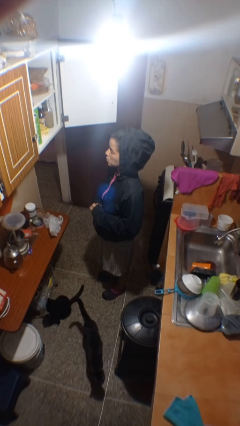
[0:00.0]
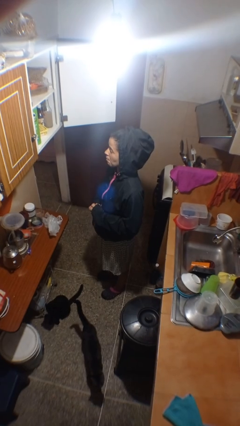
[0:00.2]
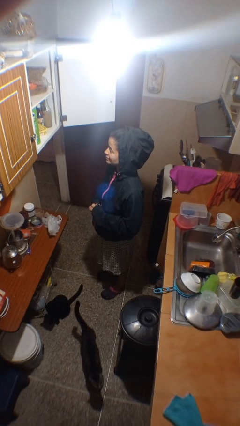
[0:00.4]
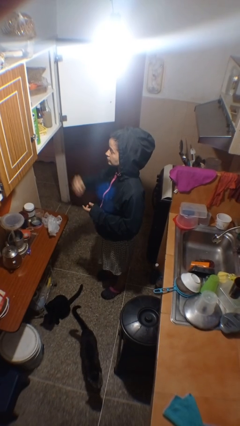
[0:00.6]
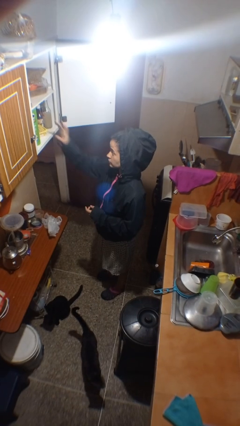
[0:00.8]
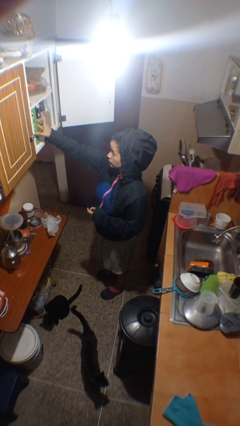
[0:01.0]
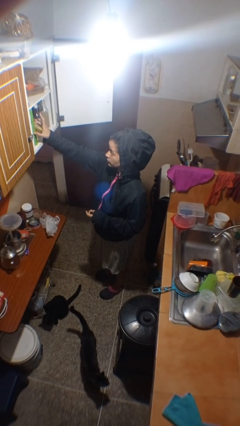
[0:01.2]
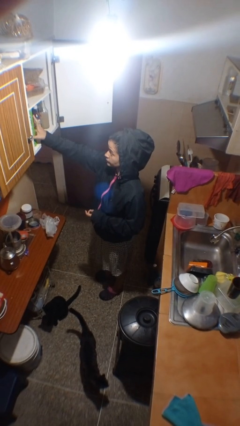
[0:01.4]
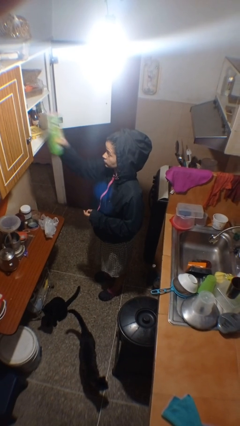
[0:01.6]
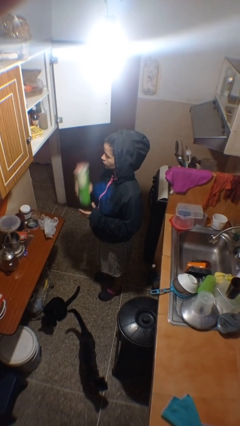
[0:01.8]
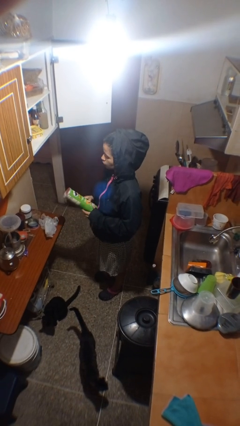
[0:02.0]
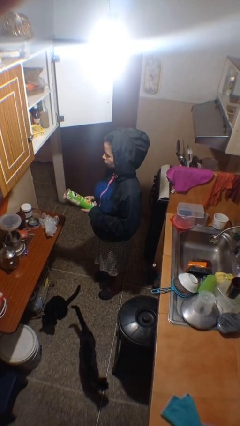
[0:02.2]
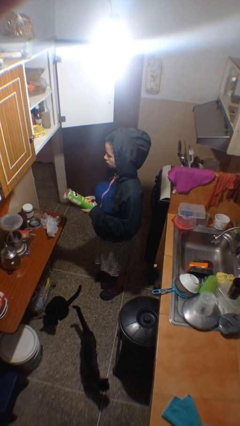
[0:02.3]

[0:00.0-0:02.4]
person takes object from cabinet

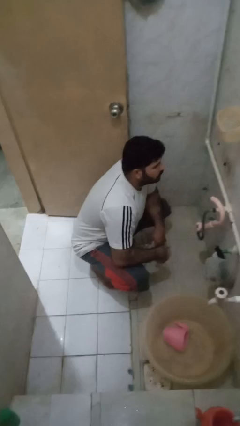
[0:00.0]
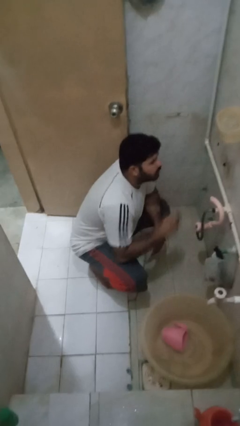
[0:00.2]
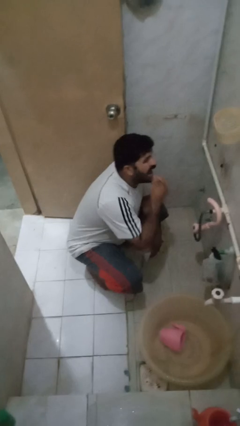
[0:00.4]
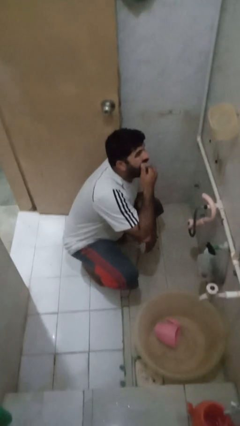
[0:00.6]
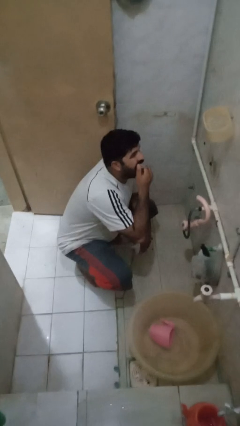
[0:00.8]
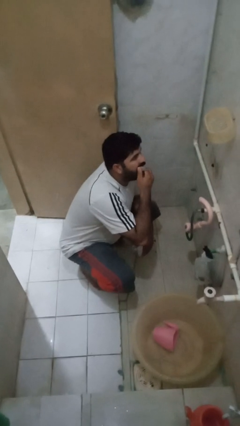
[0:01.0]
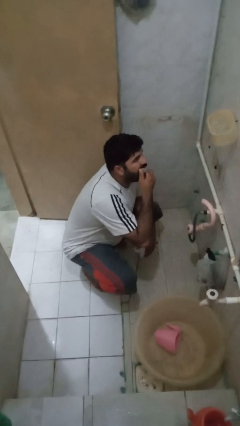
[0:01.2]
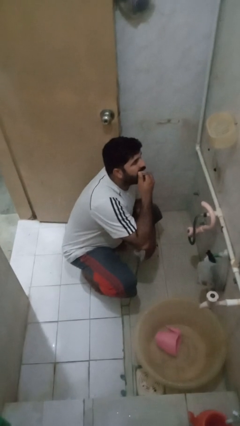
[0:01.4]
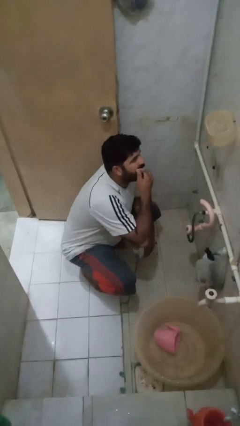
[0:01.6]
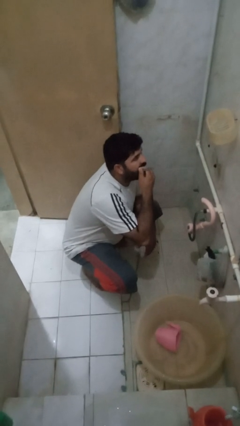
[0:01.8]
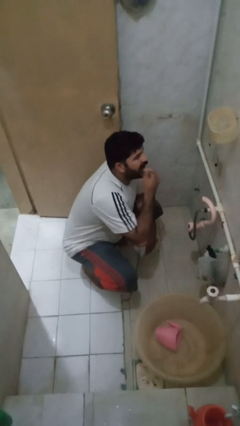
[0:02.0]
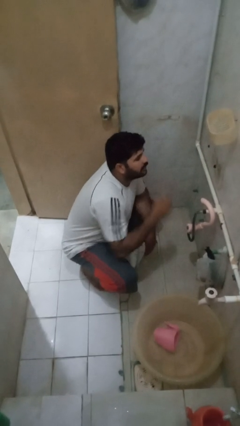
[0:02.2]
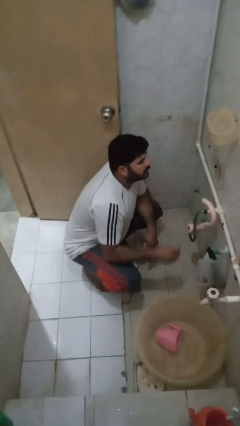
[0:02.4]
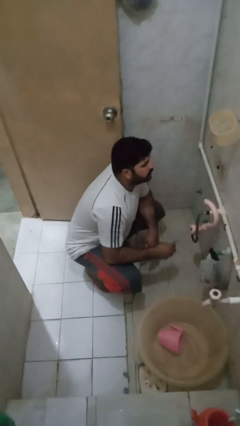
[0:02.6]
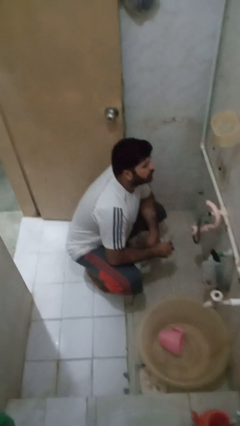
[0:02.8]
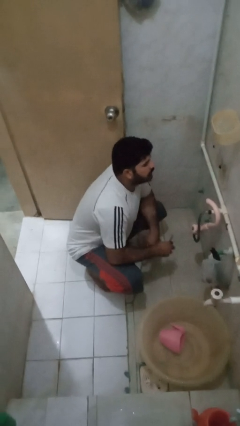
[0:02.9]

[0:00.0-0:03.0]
person flosses

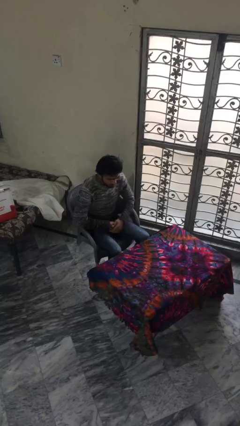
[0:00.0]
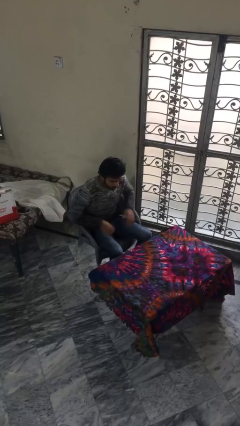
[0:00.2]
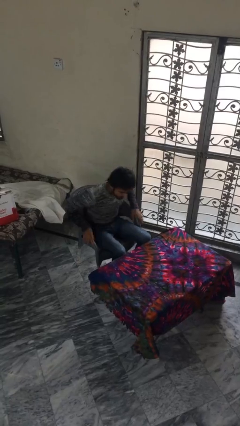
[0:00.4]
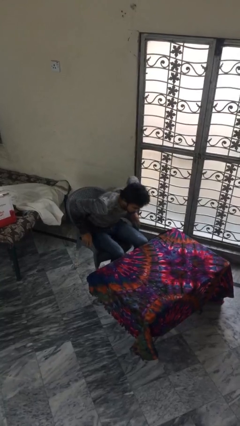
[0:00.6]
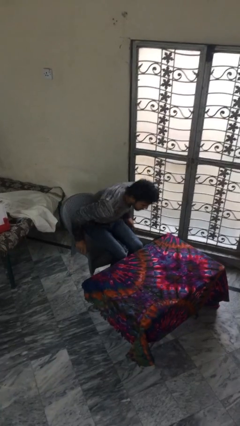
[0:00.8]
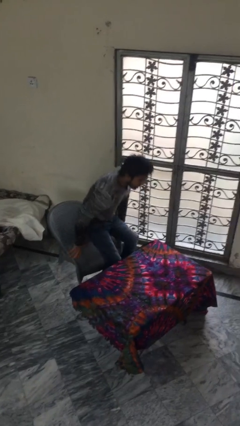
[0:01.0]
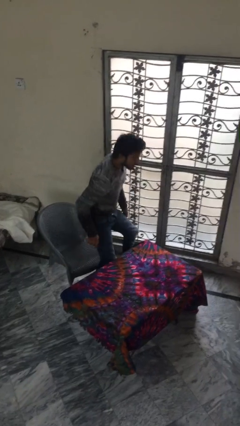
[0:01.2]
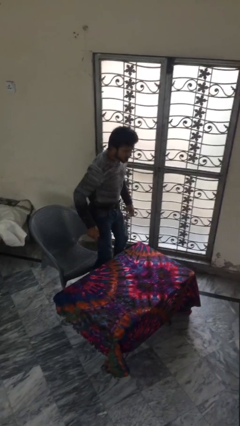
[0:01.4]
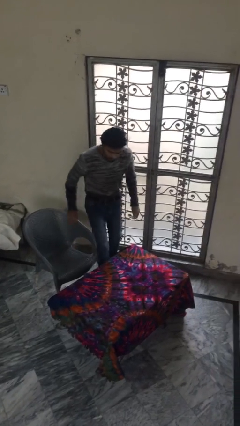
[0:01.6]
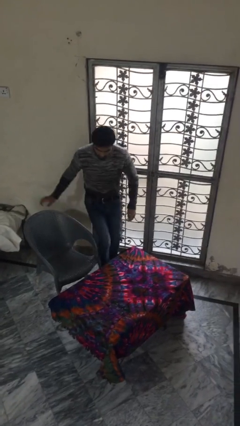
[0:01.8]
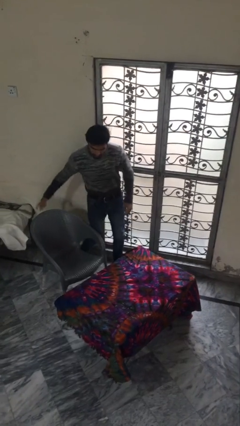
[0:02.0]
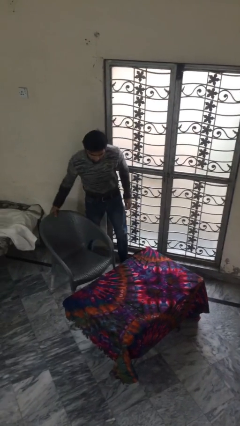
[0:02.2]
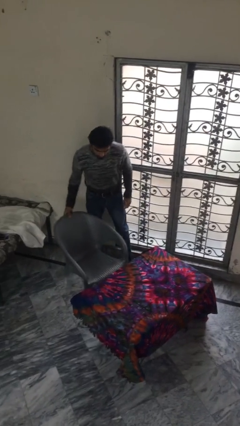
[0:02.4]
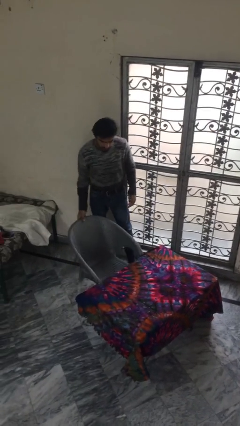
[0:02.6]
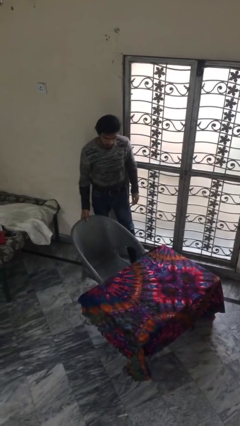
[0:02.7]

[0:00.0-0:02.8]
person stands up

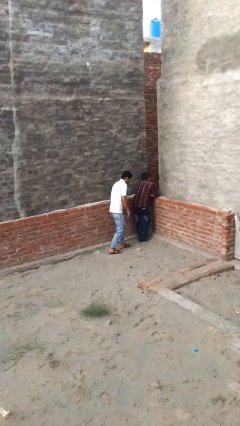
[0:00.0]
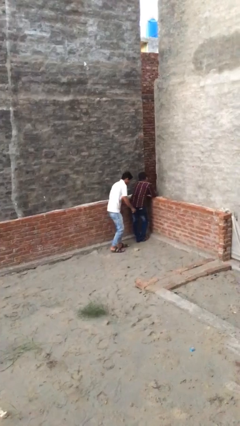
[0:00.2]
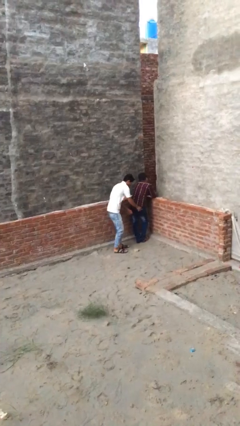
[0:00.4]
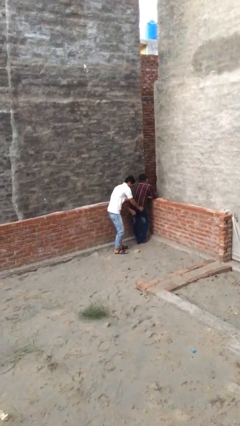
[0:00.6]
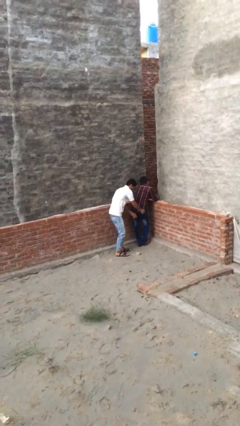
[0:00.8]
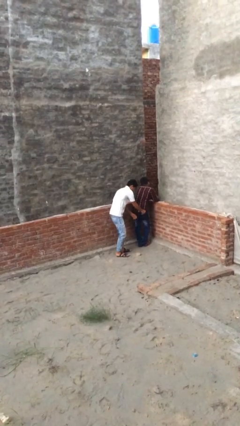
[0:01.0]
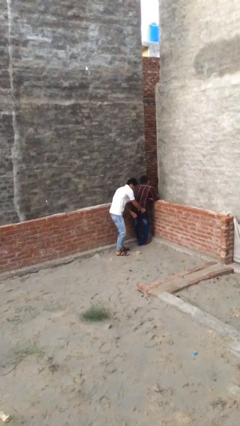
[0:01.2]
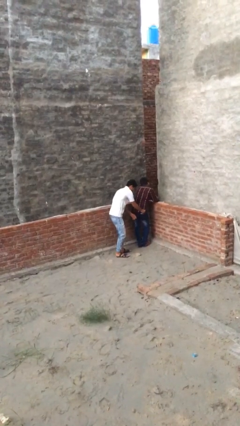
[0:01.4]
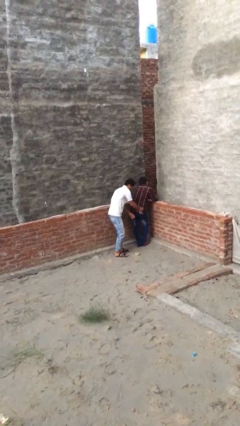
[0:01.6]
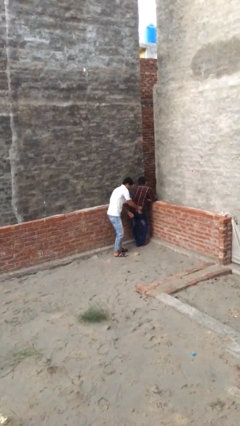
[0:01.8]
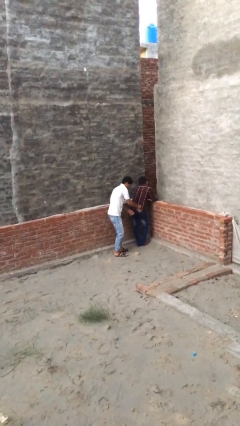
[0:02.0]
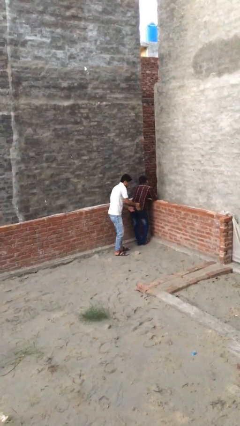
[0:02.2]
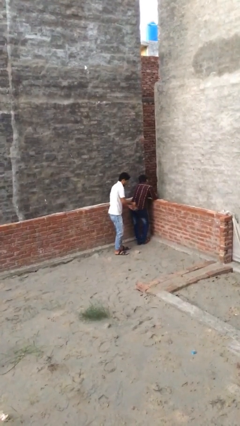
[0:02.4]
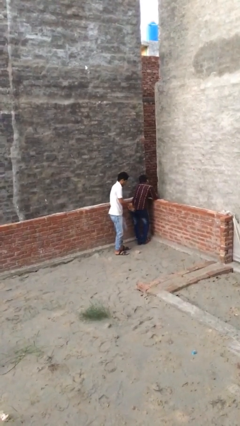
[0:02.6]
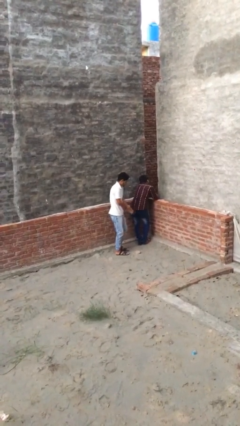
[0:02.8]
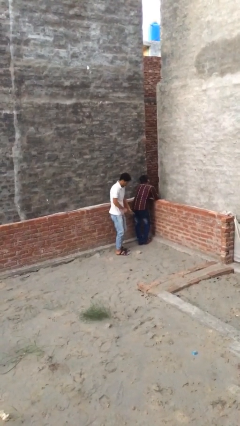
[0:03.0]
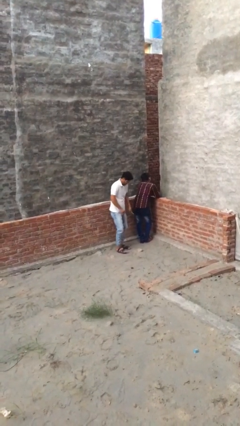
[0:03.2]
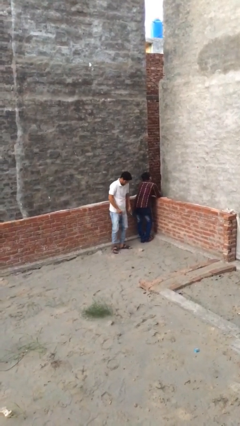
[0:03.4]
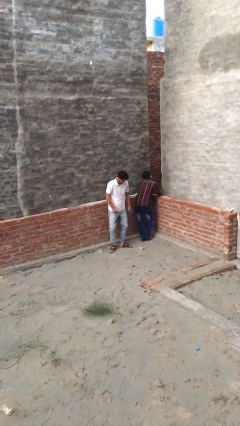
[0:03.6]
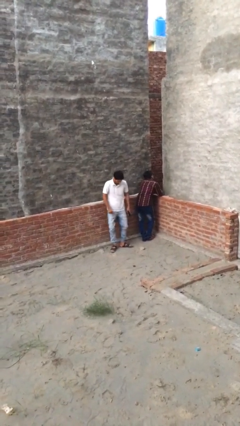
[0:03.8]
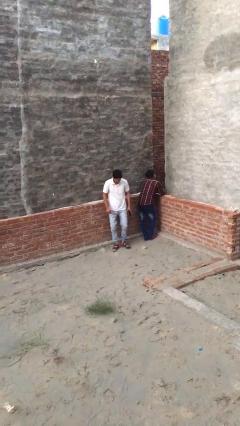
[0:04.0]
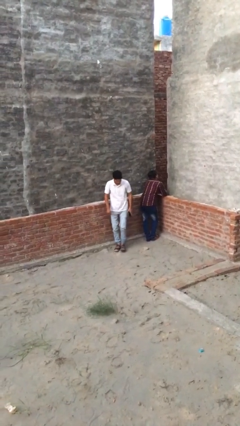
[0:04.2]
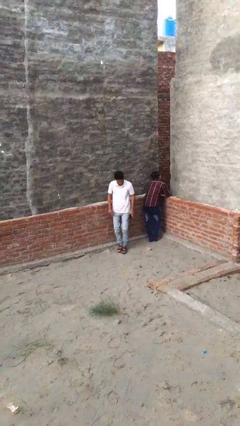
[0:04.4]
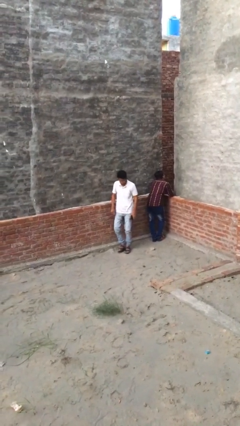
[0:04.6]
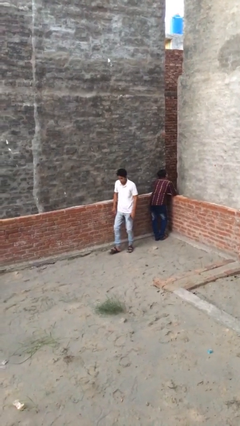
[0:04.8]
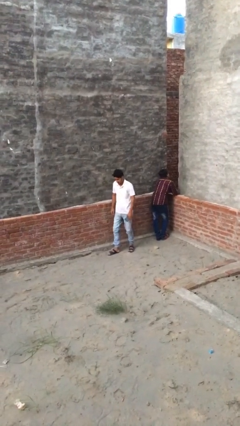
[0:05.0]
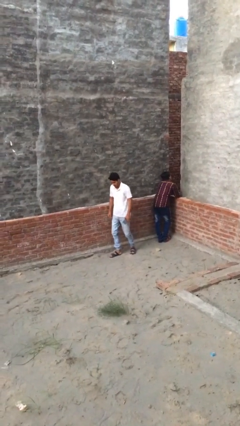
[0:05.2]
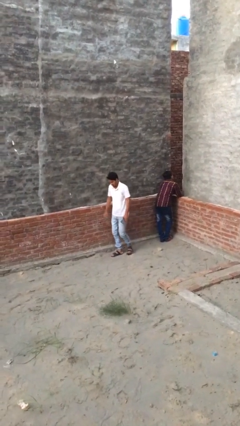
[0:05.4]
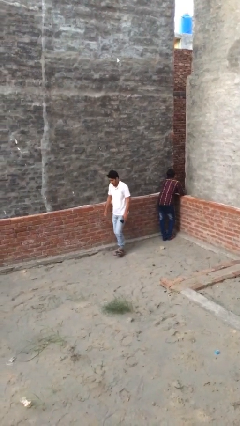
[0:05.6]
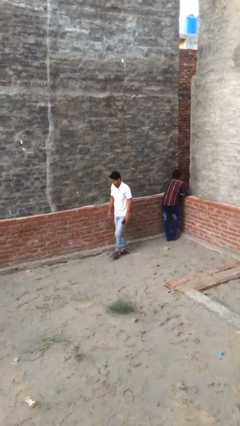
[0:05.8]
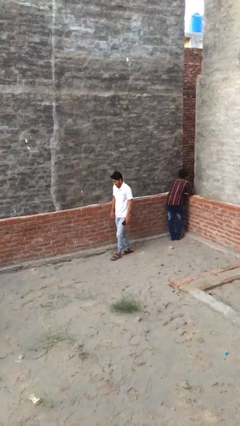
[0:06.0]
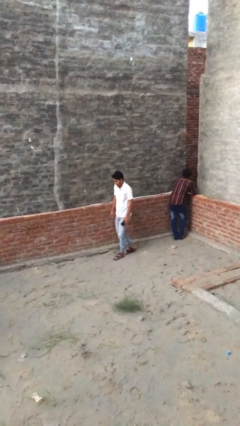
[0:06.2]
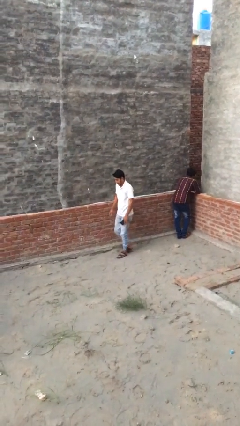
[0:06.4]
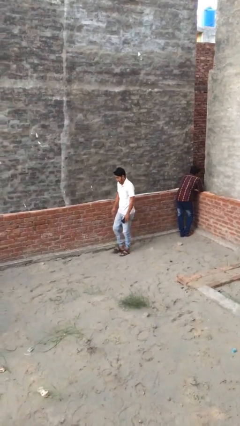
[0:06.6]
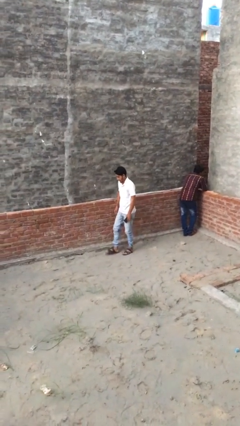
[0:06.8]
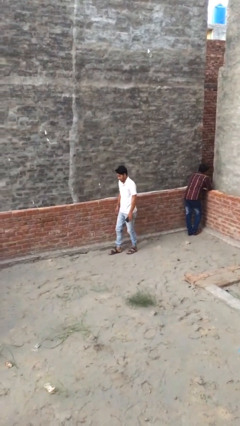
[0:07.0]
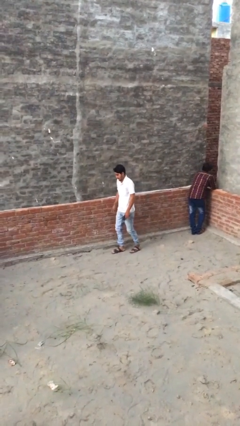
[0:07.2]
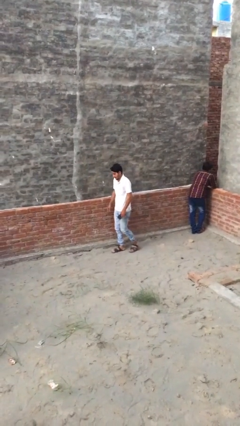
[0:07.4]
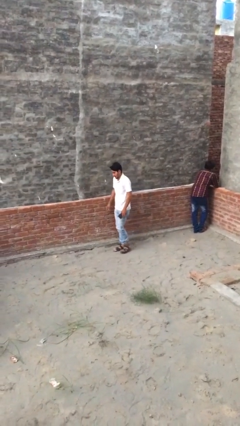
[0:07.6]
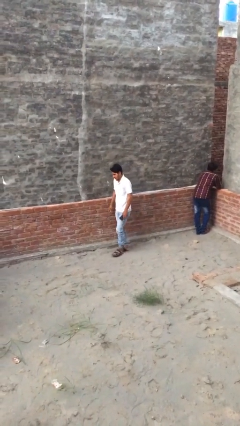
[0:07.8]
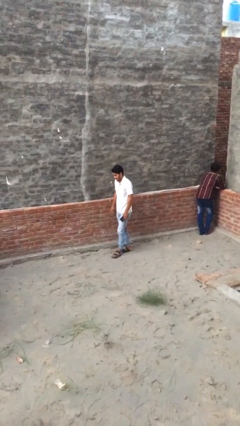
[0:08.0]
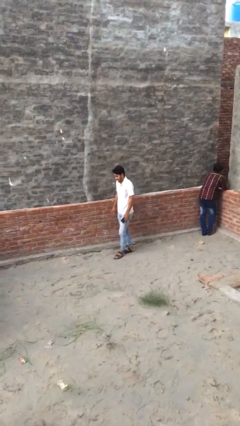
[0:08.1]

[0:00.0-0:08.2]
person steals object from person

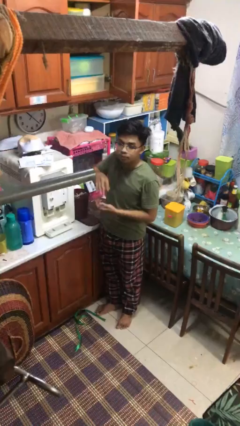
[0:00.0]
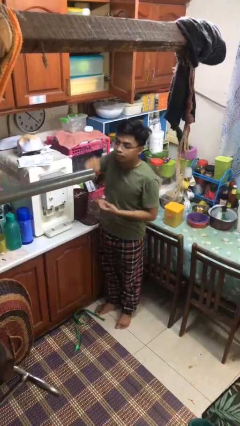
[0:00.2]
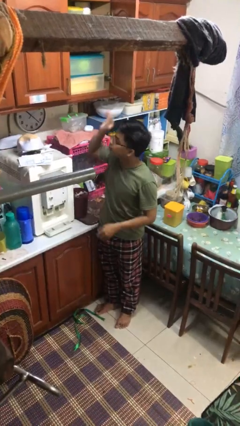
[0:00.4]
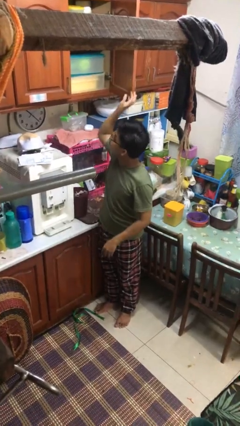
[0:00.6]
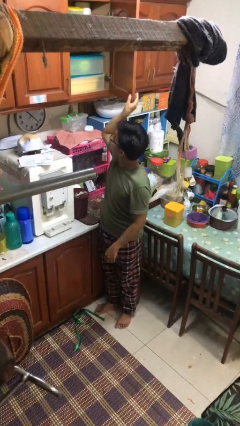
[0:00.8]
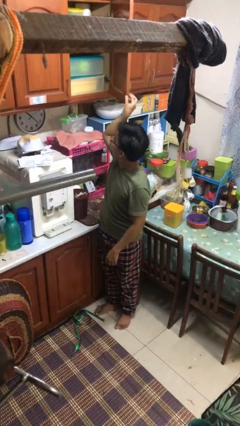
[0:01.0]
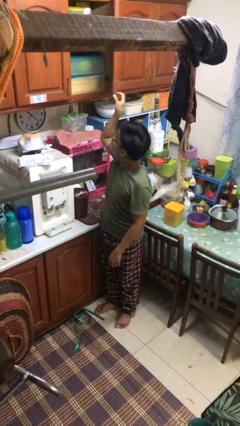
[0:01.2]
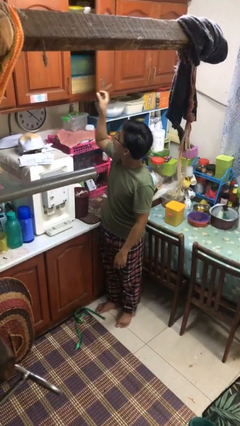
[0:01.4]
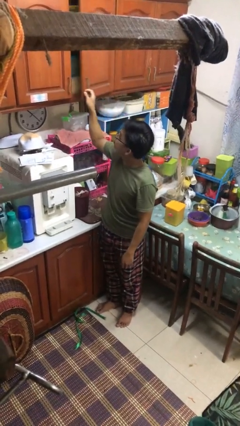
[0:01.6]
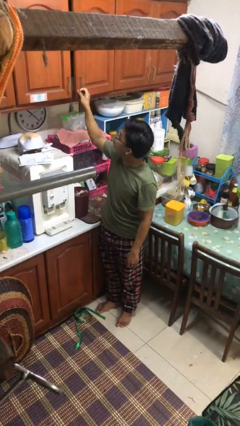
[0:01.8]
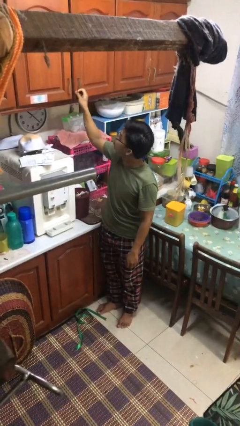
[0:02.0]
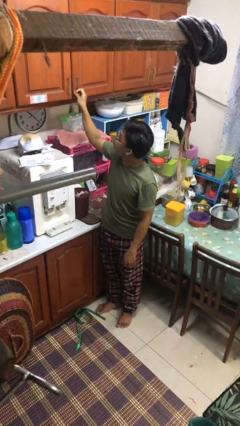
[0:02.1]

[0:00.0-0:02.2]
person closes kitchen drawer
